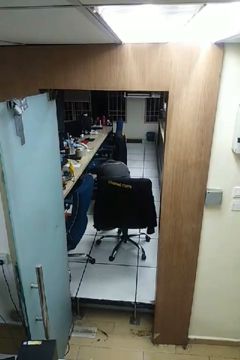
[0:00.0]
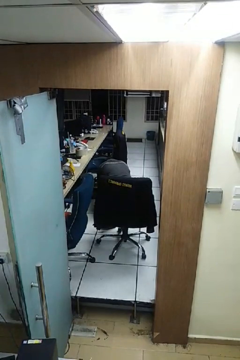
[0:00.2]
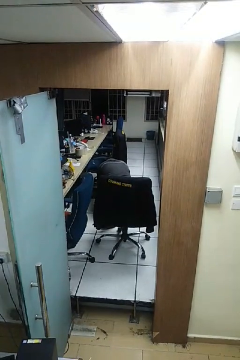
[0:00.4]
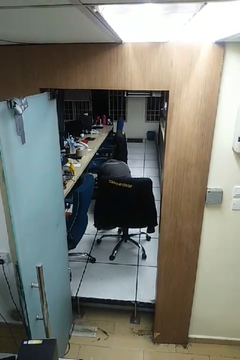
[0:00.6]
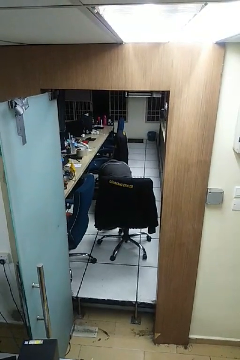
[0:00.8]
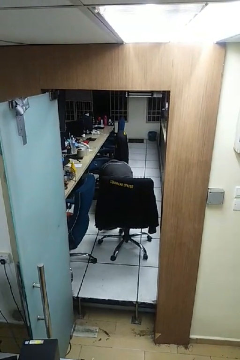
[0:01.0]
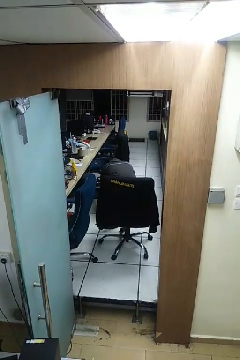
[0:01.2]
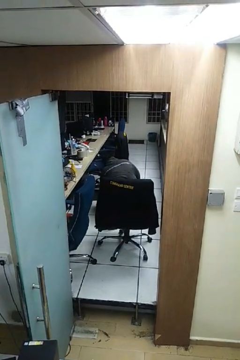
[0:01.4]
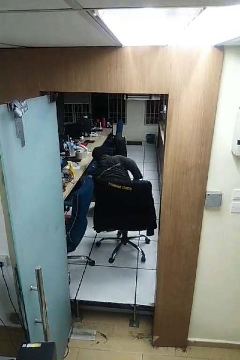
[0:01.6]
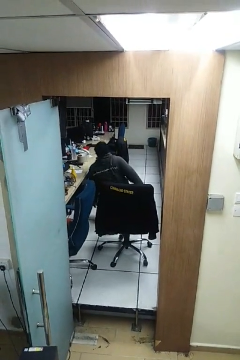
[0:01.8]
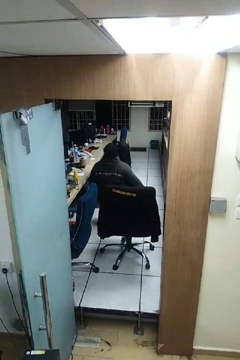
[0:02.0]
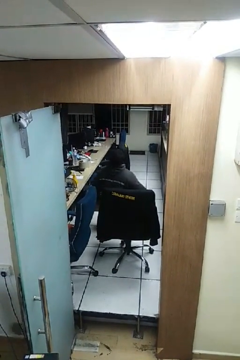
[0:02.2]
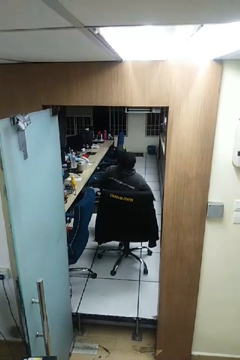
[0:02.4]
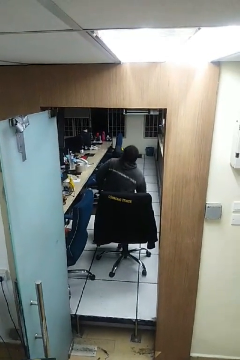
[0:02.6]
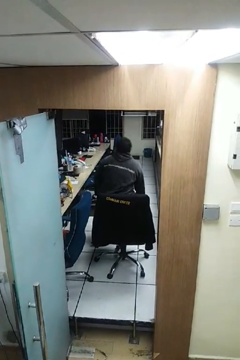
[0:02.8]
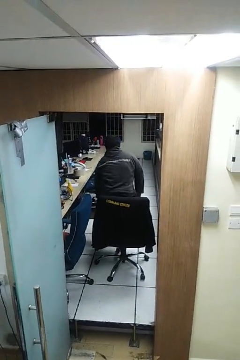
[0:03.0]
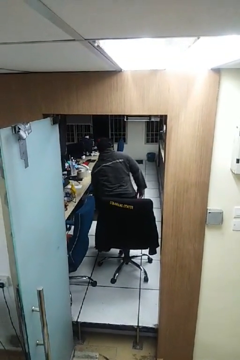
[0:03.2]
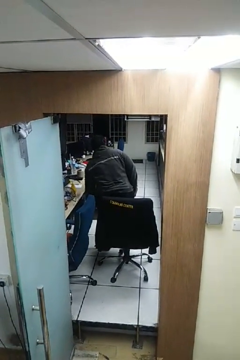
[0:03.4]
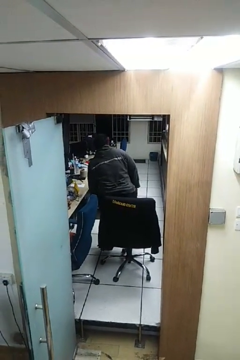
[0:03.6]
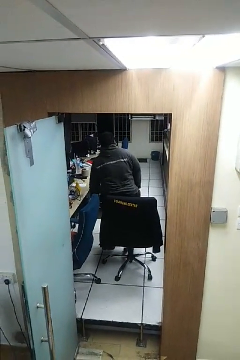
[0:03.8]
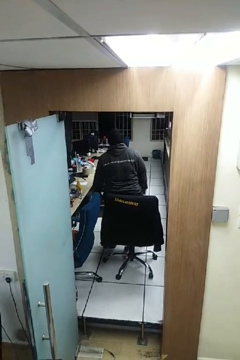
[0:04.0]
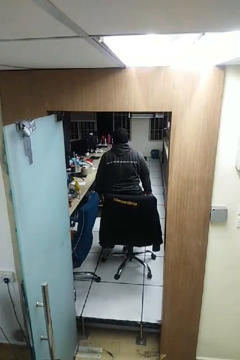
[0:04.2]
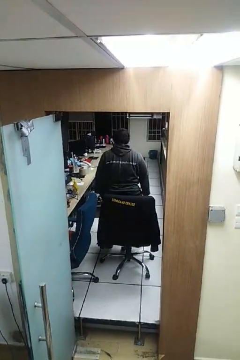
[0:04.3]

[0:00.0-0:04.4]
person stands up from floor

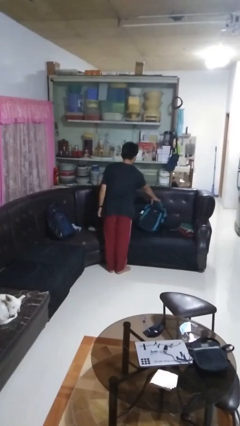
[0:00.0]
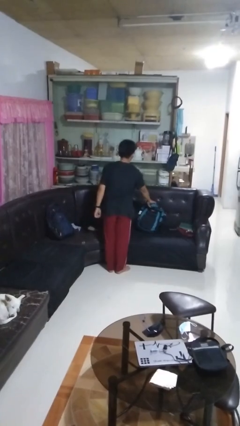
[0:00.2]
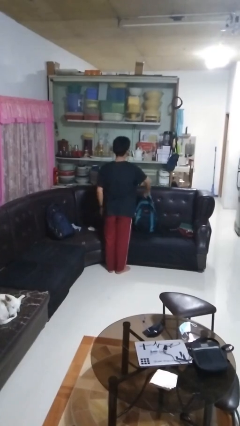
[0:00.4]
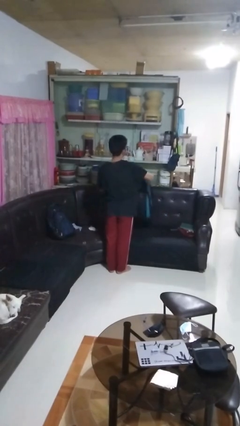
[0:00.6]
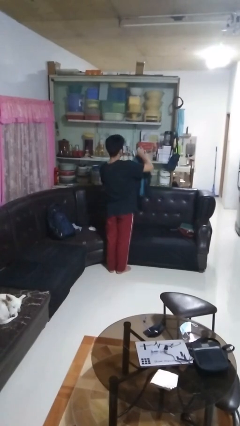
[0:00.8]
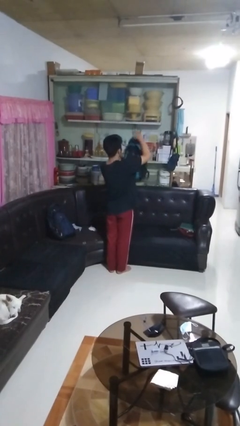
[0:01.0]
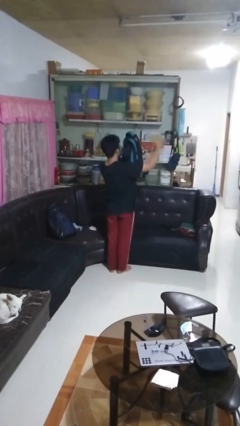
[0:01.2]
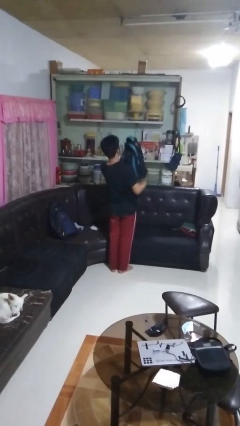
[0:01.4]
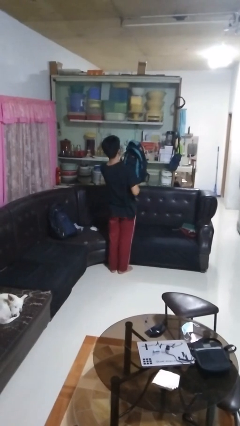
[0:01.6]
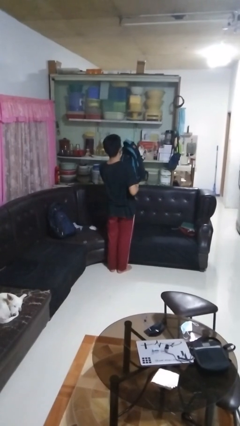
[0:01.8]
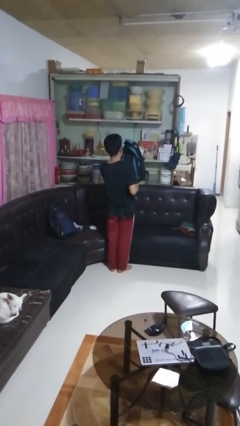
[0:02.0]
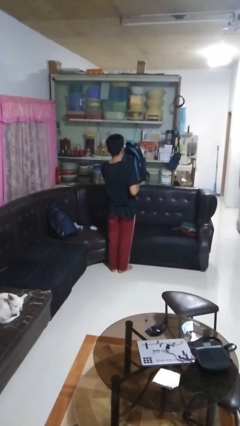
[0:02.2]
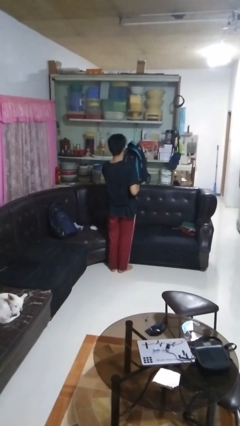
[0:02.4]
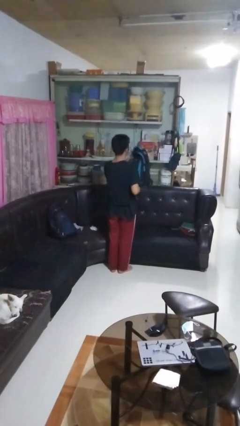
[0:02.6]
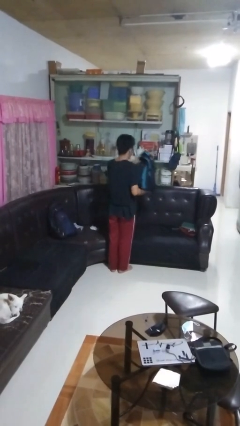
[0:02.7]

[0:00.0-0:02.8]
person picks up object from couch

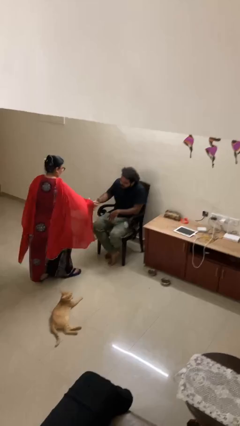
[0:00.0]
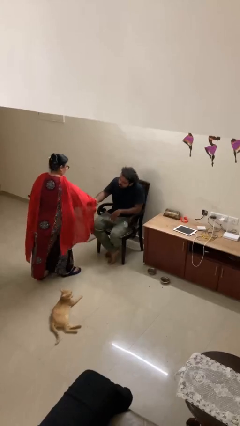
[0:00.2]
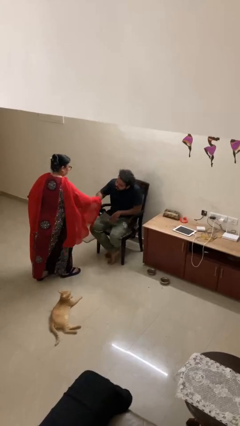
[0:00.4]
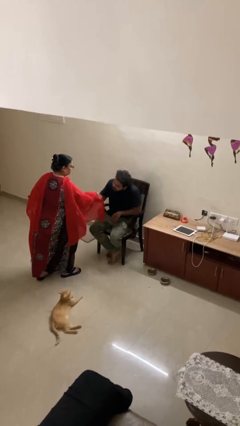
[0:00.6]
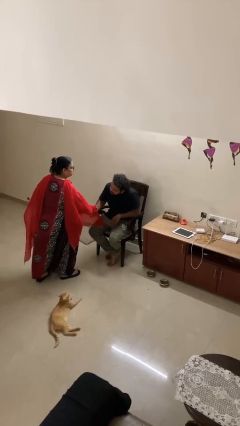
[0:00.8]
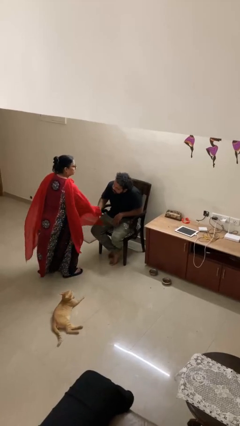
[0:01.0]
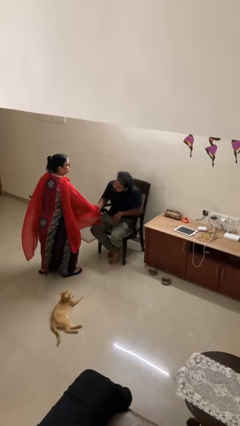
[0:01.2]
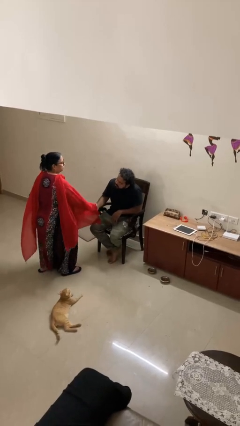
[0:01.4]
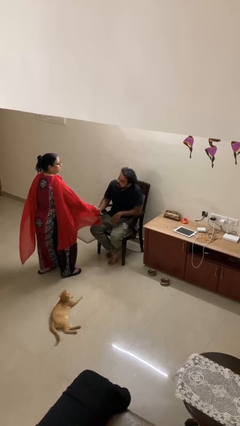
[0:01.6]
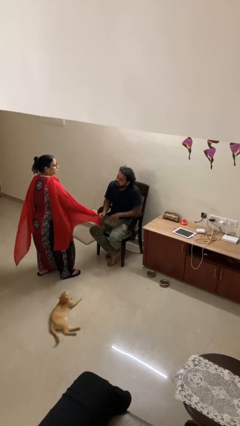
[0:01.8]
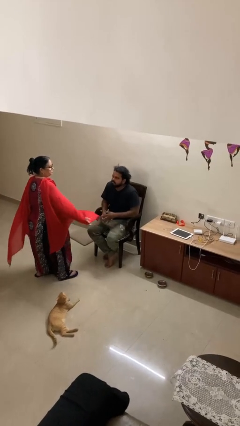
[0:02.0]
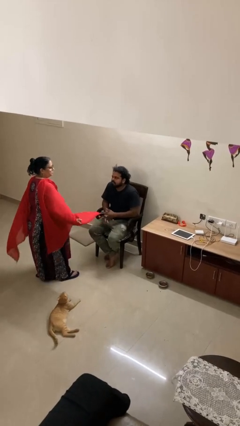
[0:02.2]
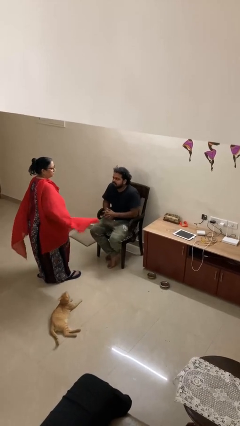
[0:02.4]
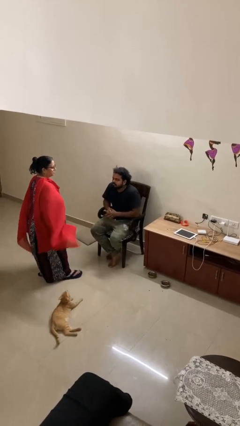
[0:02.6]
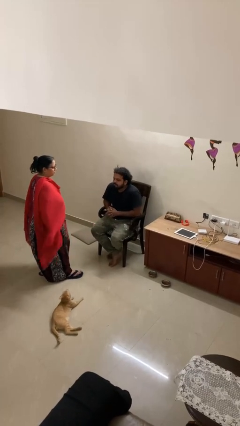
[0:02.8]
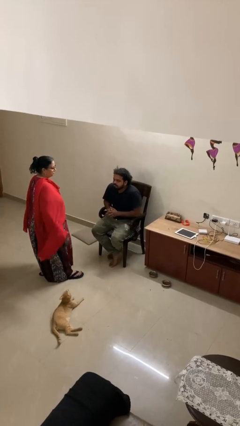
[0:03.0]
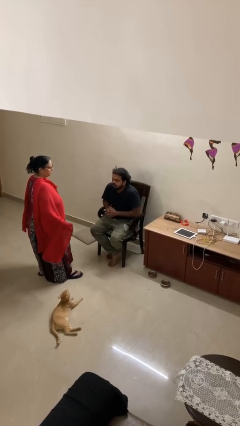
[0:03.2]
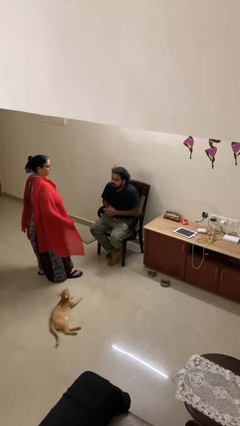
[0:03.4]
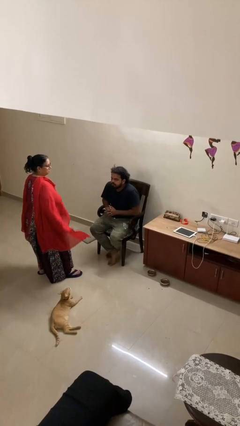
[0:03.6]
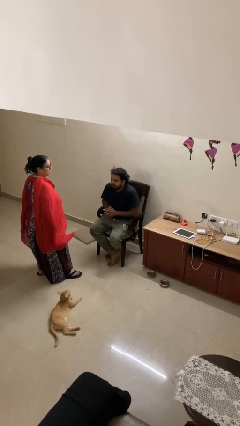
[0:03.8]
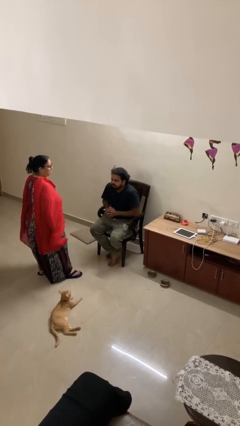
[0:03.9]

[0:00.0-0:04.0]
person shakes hand

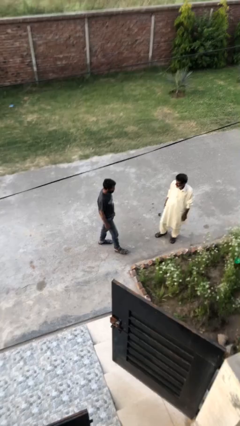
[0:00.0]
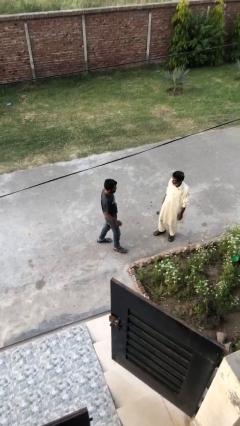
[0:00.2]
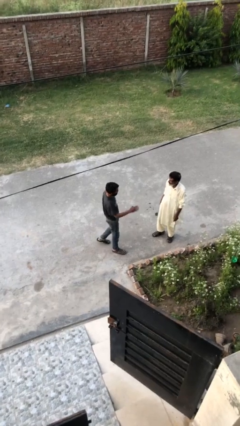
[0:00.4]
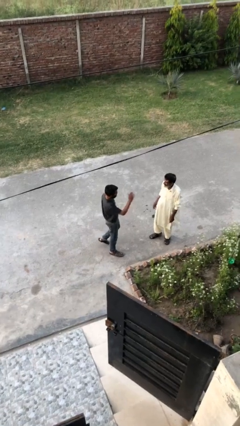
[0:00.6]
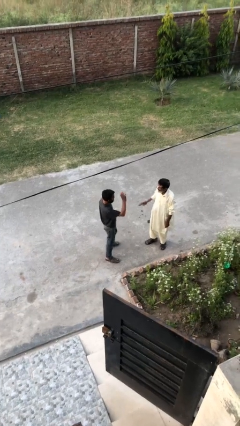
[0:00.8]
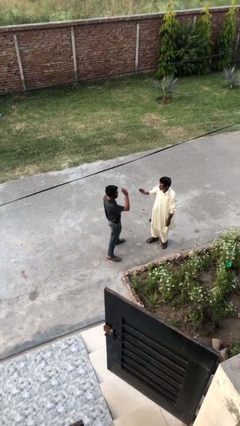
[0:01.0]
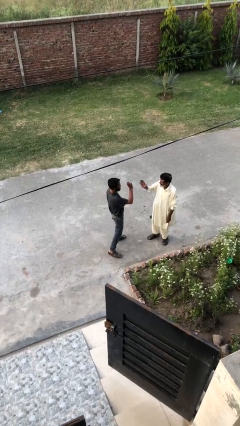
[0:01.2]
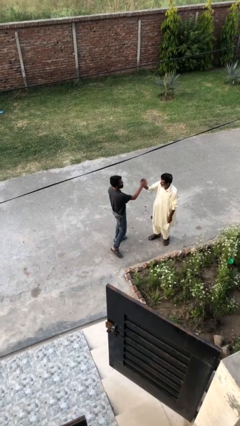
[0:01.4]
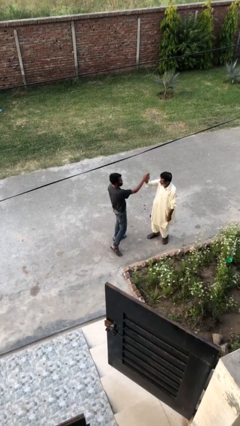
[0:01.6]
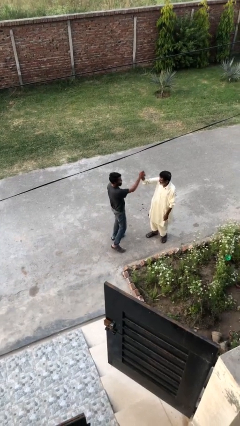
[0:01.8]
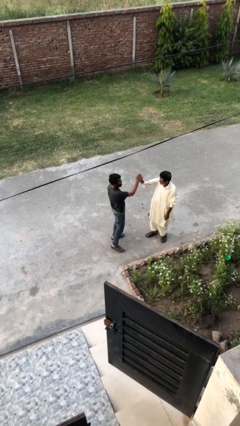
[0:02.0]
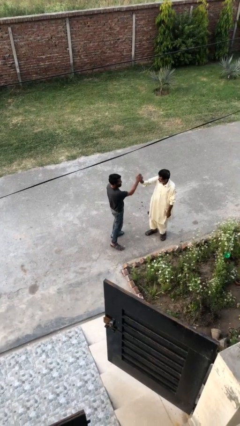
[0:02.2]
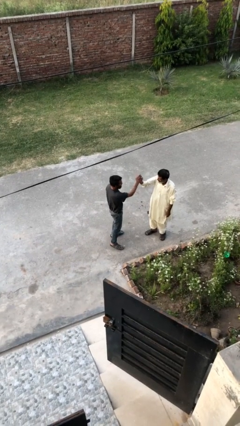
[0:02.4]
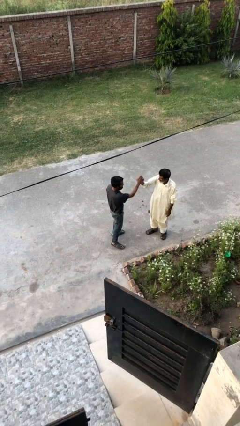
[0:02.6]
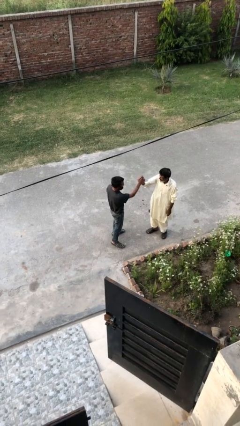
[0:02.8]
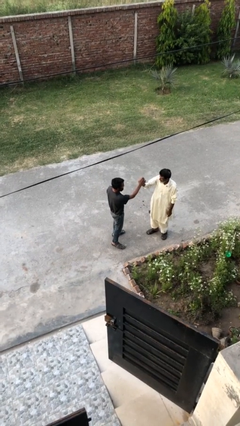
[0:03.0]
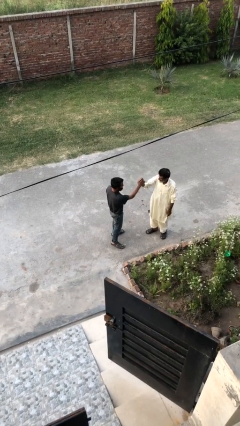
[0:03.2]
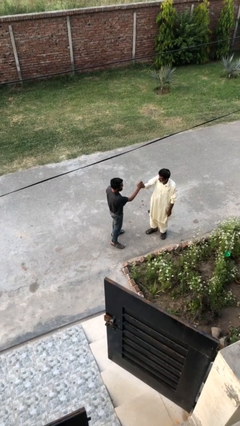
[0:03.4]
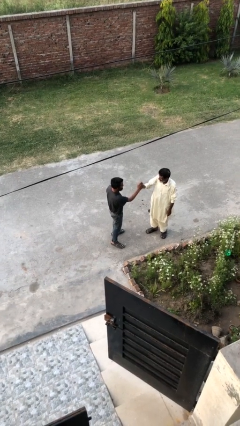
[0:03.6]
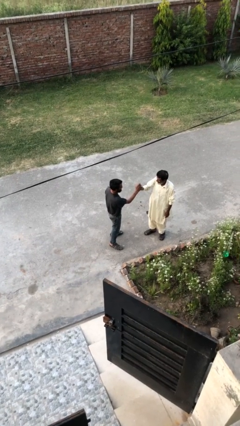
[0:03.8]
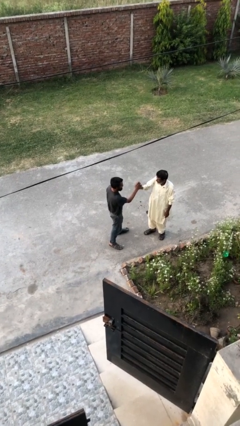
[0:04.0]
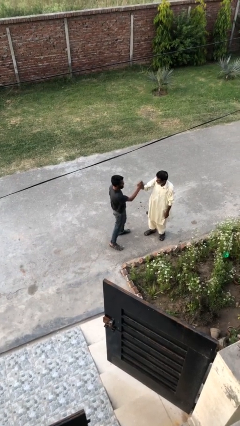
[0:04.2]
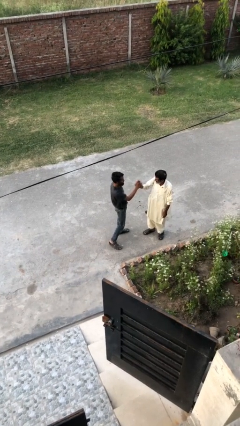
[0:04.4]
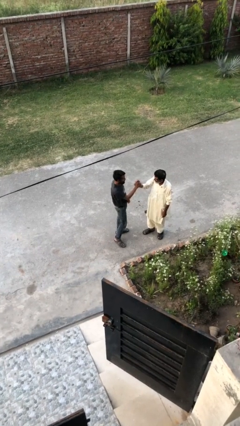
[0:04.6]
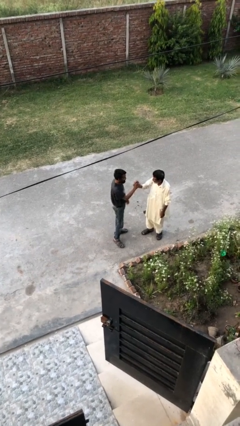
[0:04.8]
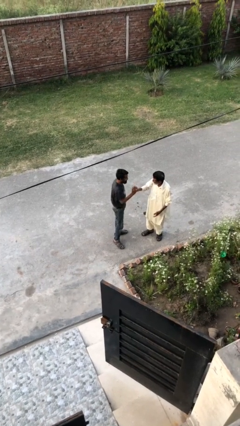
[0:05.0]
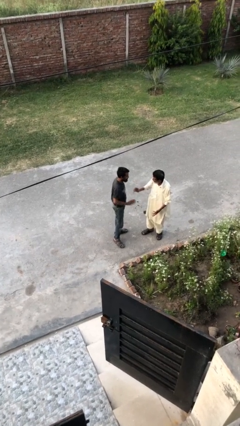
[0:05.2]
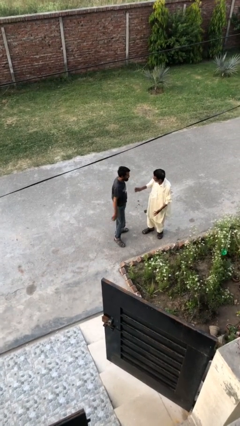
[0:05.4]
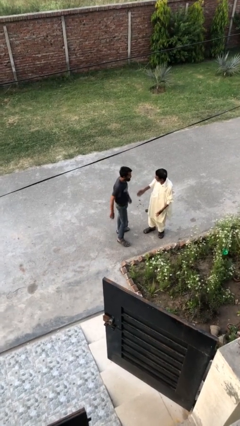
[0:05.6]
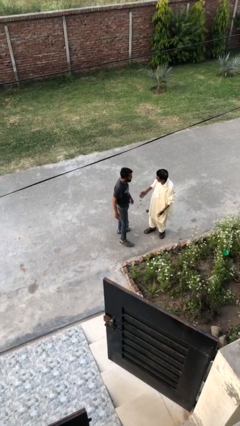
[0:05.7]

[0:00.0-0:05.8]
person highfives hand

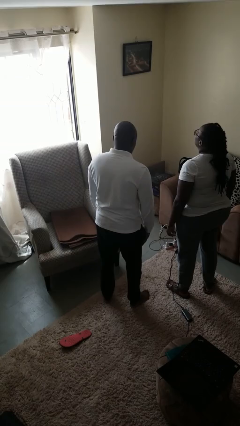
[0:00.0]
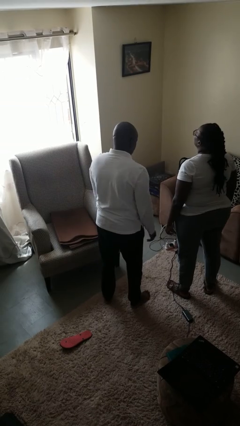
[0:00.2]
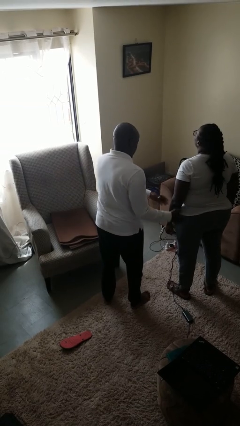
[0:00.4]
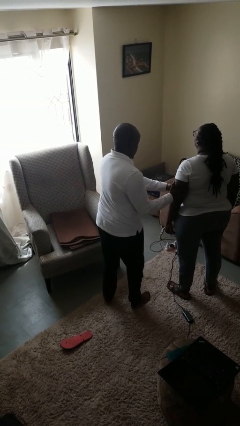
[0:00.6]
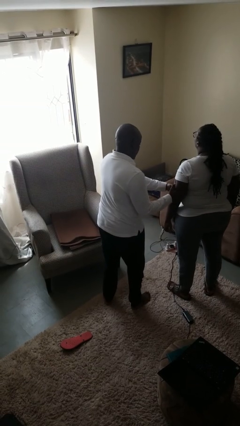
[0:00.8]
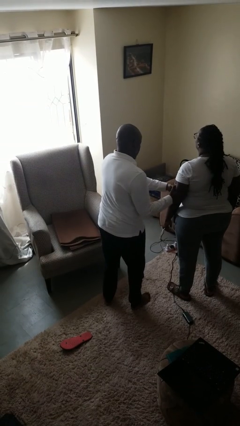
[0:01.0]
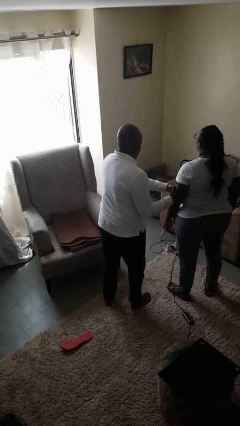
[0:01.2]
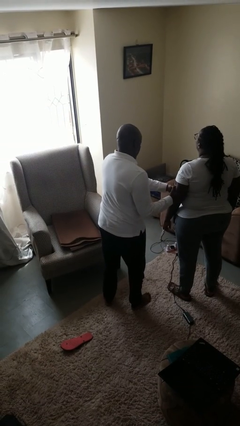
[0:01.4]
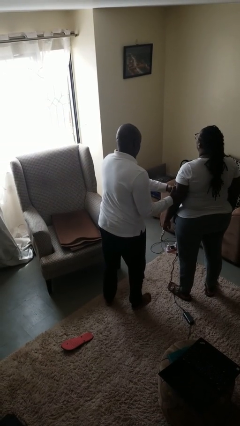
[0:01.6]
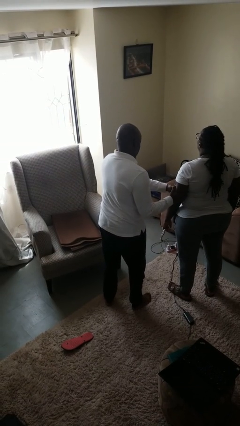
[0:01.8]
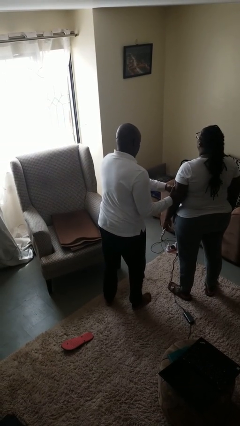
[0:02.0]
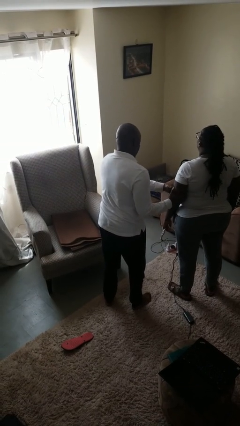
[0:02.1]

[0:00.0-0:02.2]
person grabs person by bicep
